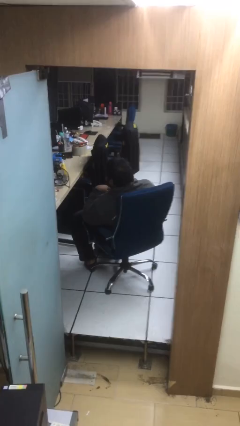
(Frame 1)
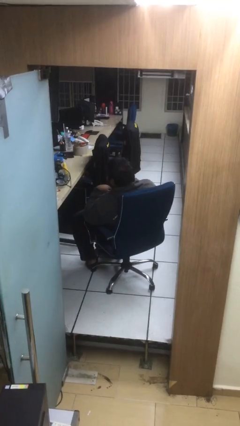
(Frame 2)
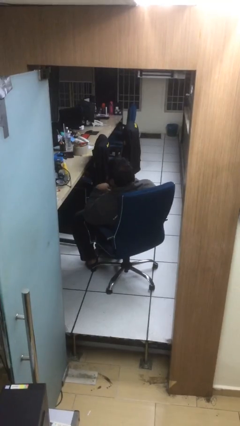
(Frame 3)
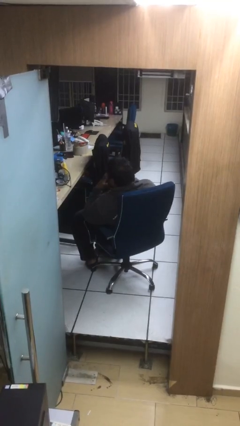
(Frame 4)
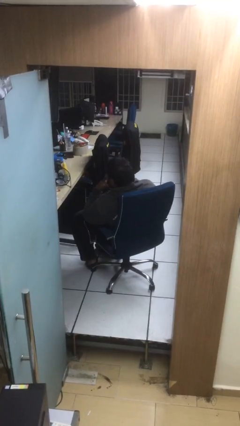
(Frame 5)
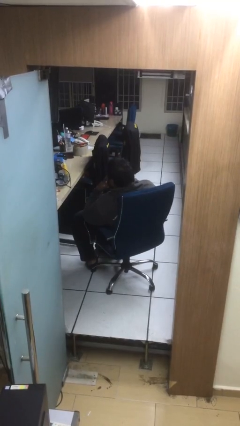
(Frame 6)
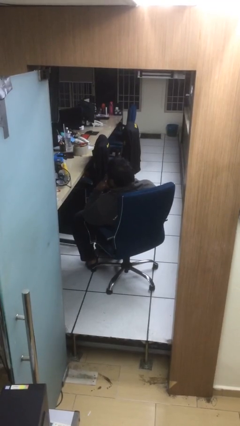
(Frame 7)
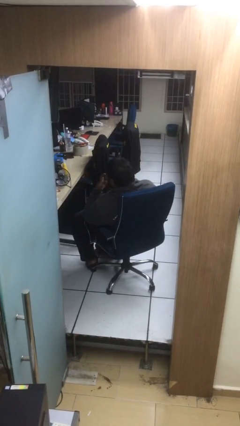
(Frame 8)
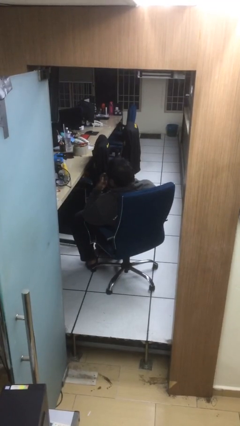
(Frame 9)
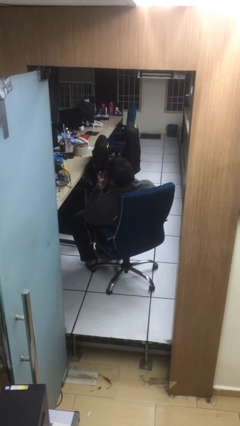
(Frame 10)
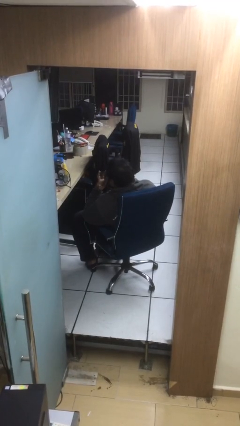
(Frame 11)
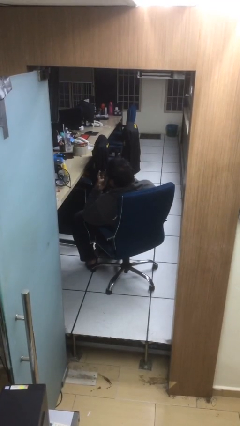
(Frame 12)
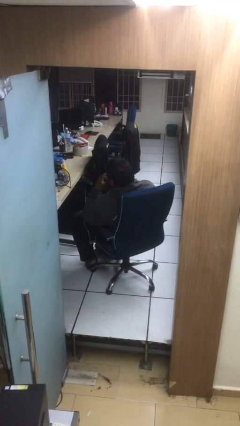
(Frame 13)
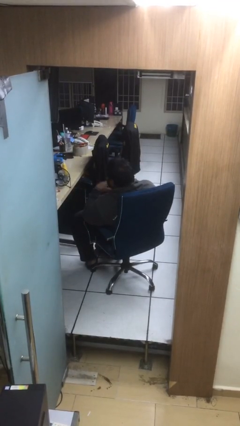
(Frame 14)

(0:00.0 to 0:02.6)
person licks fingers

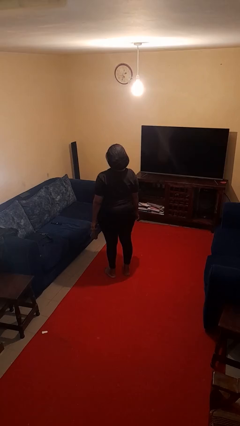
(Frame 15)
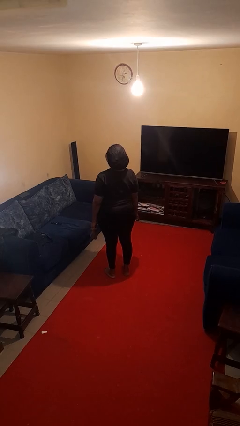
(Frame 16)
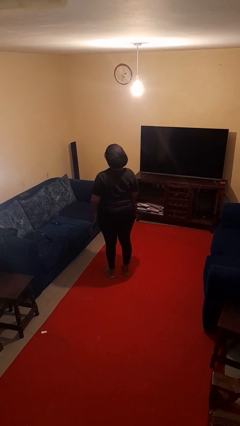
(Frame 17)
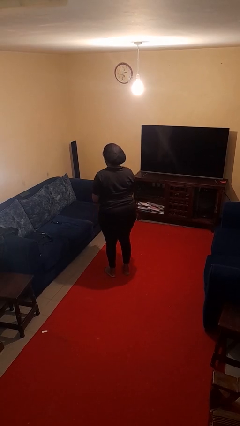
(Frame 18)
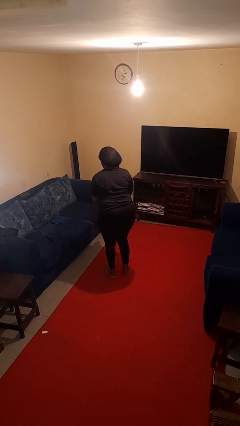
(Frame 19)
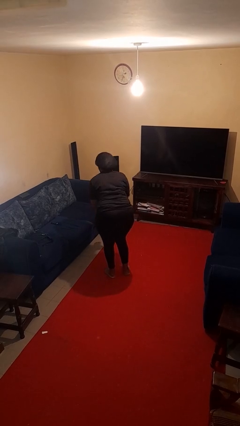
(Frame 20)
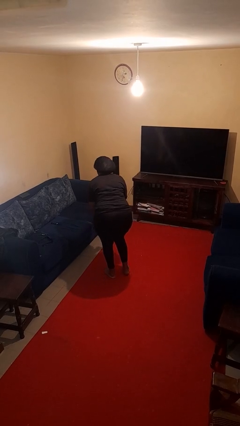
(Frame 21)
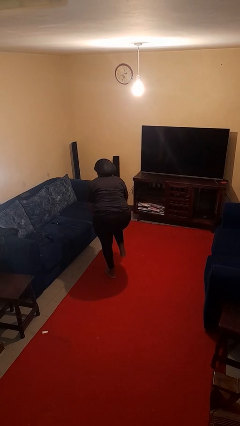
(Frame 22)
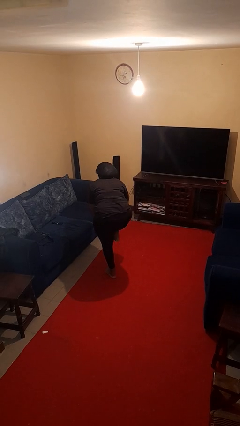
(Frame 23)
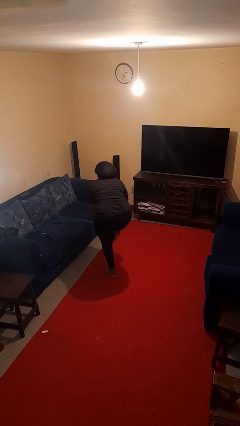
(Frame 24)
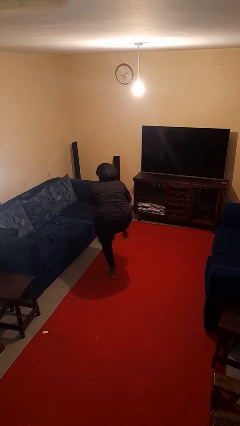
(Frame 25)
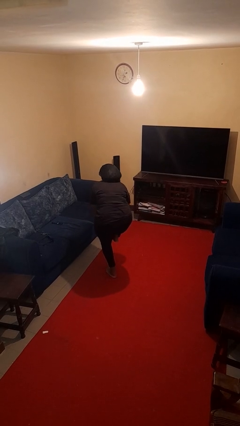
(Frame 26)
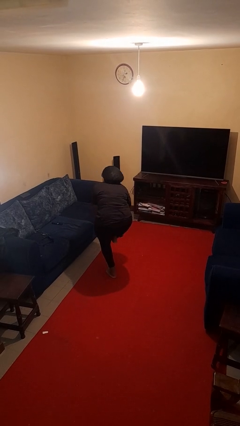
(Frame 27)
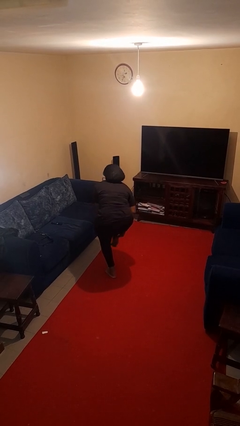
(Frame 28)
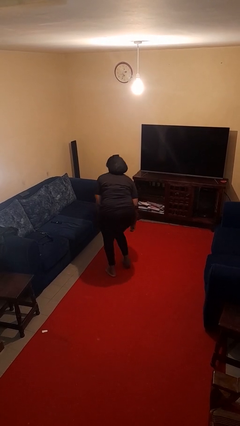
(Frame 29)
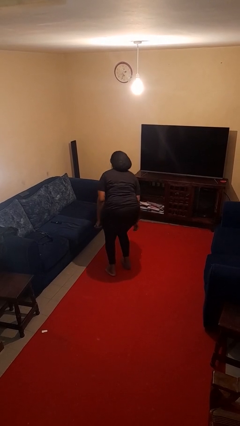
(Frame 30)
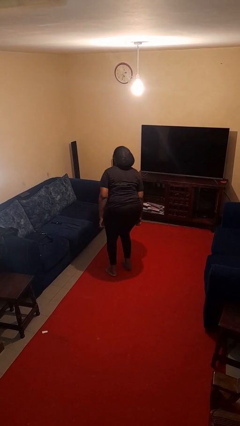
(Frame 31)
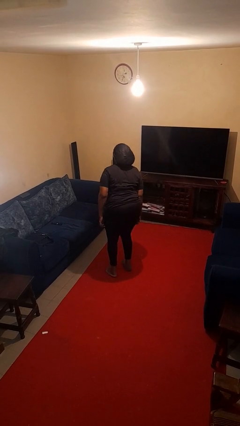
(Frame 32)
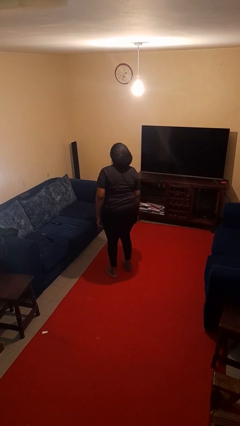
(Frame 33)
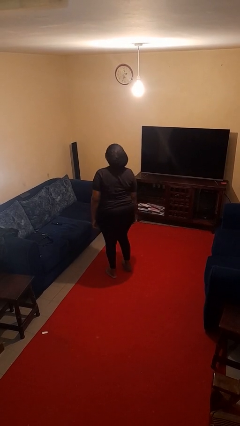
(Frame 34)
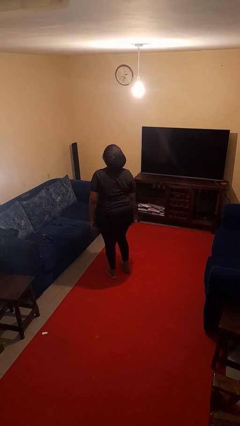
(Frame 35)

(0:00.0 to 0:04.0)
person puts on socks

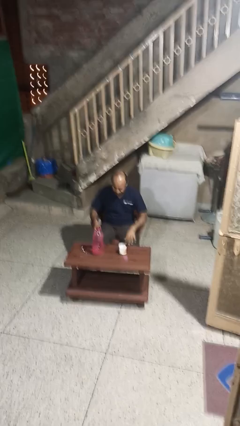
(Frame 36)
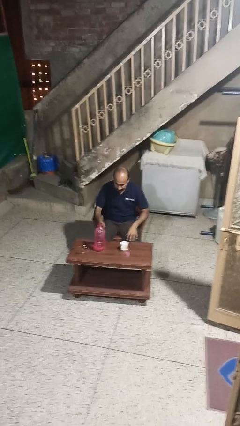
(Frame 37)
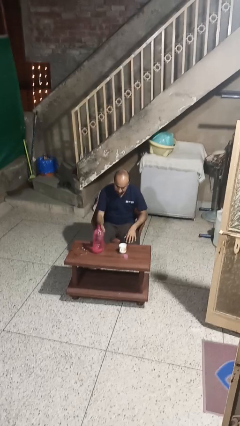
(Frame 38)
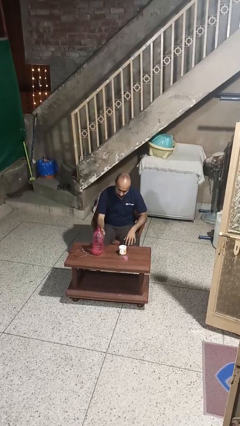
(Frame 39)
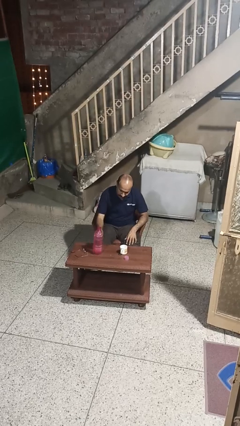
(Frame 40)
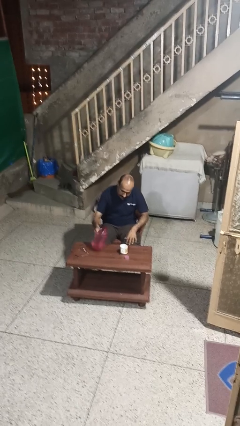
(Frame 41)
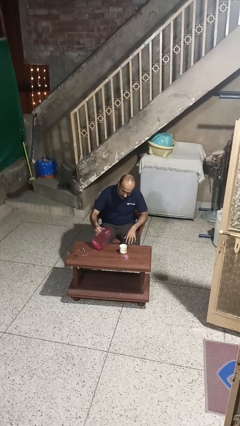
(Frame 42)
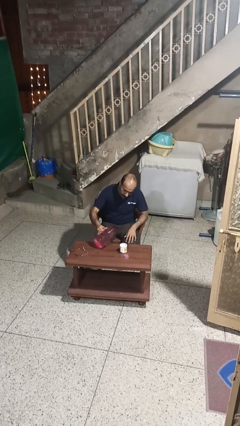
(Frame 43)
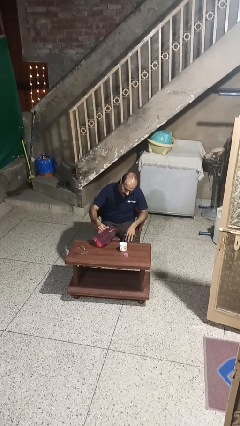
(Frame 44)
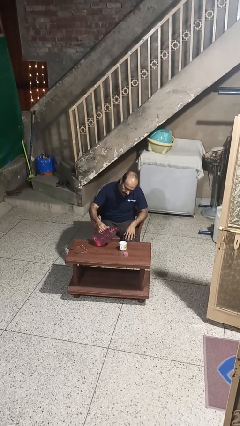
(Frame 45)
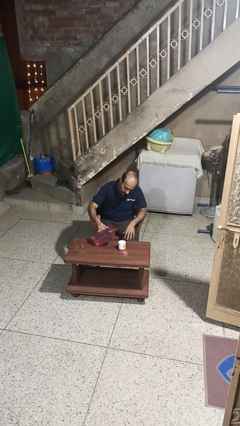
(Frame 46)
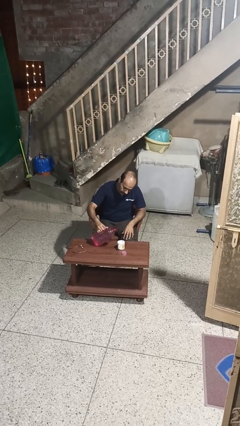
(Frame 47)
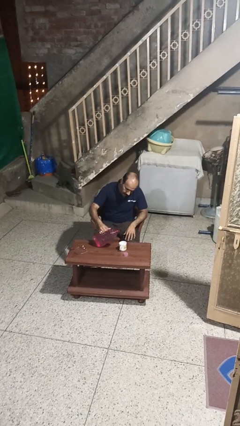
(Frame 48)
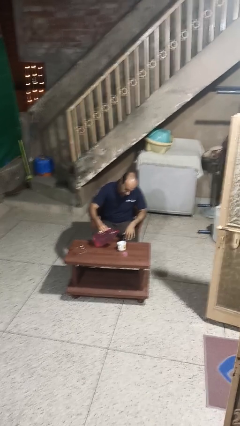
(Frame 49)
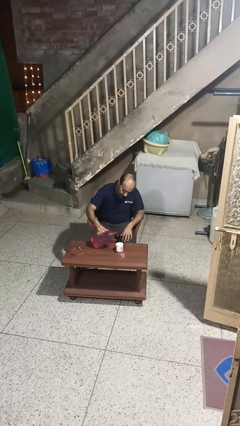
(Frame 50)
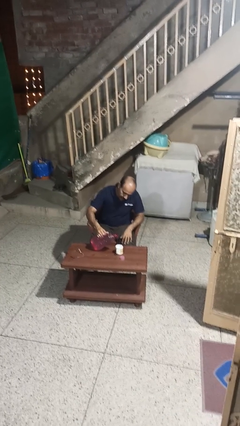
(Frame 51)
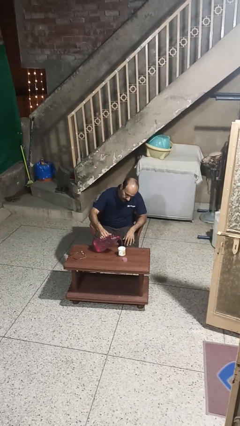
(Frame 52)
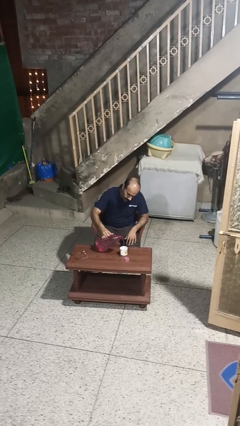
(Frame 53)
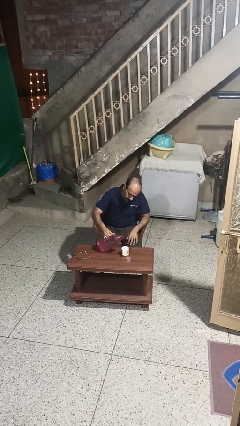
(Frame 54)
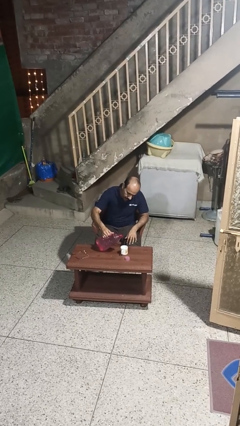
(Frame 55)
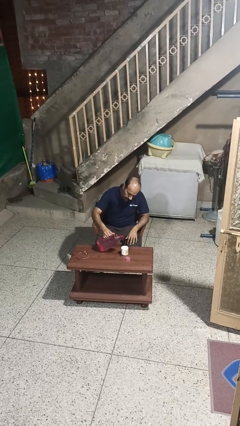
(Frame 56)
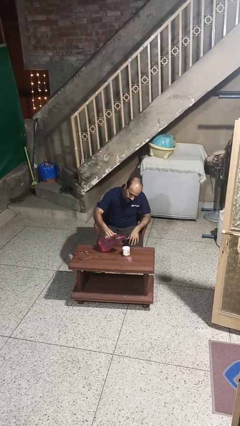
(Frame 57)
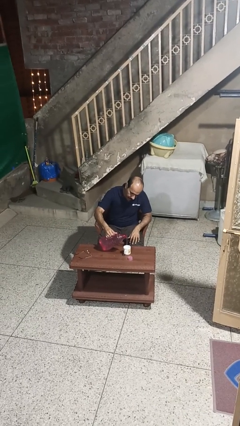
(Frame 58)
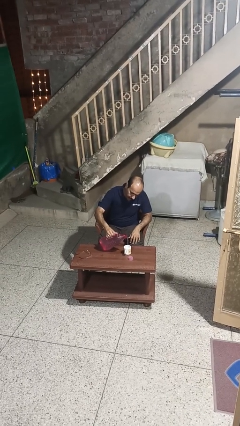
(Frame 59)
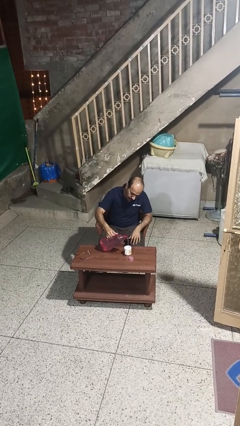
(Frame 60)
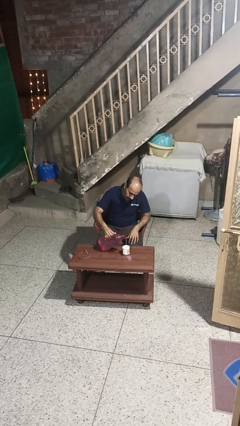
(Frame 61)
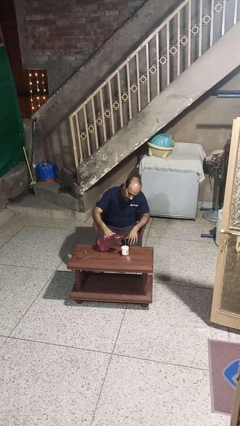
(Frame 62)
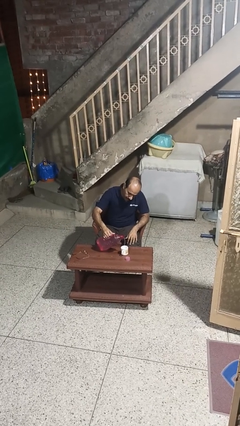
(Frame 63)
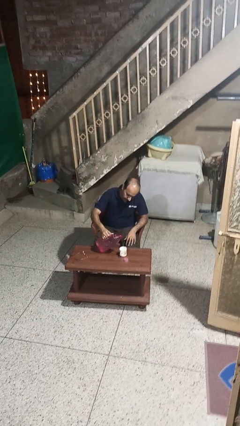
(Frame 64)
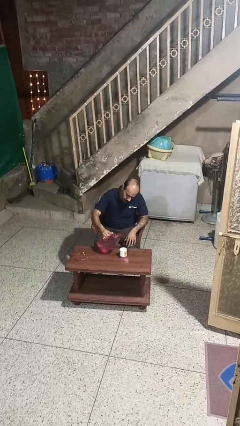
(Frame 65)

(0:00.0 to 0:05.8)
person pours liquid into cup

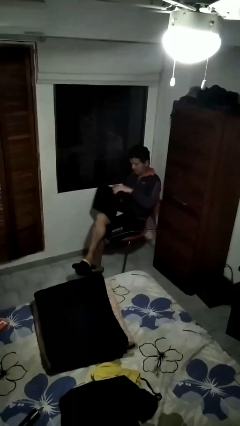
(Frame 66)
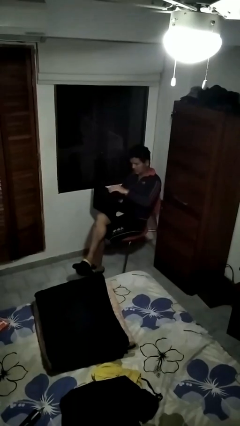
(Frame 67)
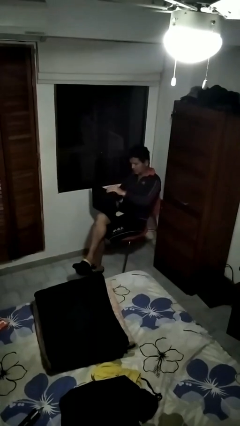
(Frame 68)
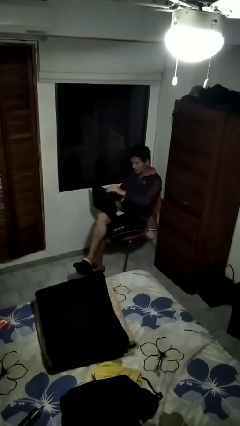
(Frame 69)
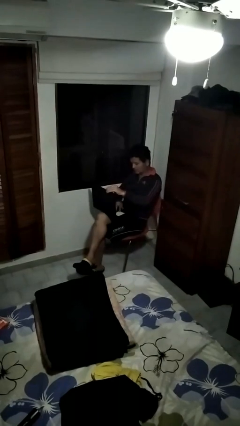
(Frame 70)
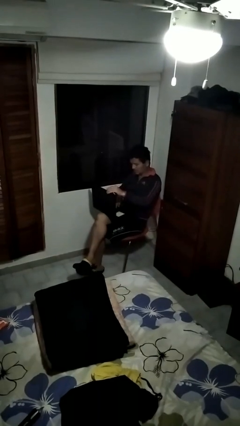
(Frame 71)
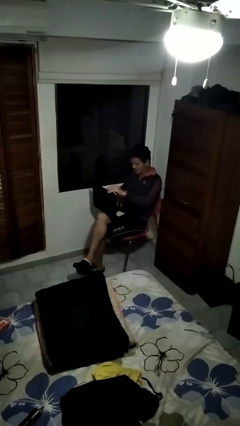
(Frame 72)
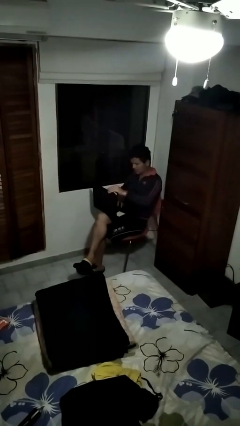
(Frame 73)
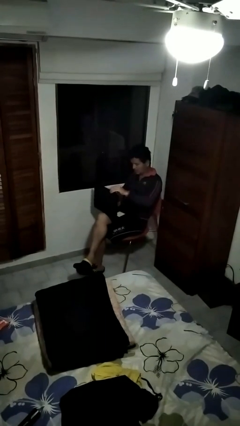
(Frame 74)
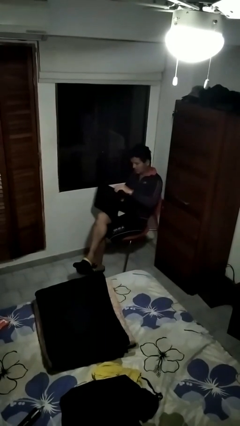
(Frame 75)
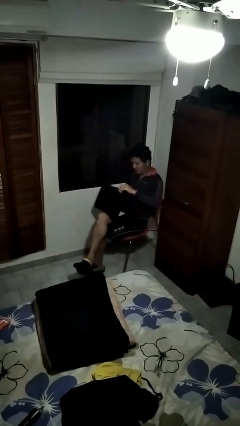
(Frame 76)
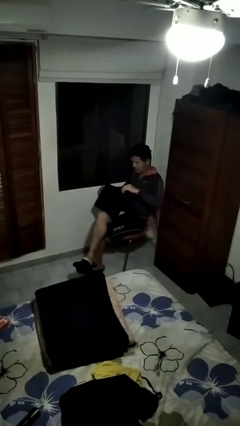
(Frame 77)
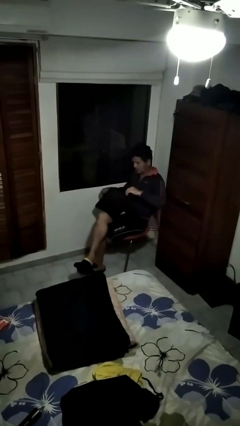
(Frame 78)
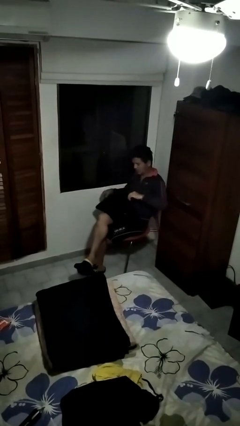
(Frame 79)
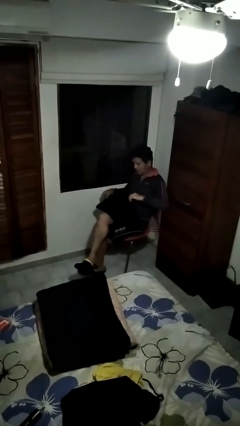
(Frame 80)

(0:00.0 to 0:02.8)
person interacts with laptop

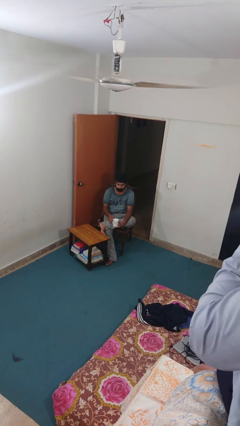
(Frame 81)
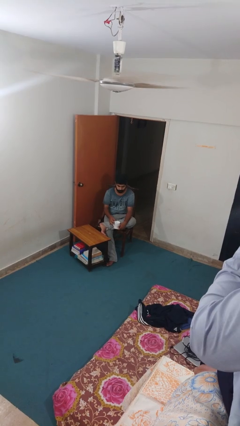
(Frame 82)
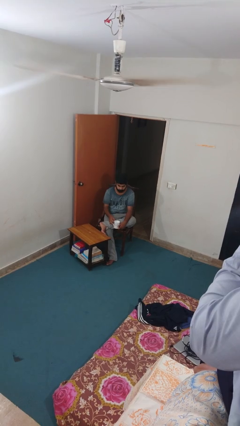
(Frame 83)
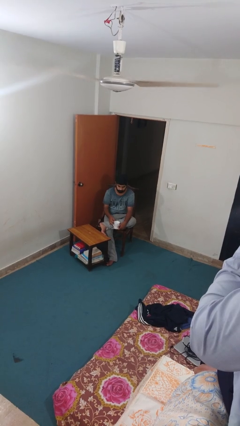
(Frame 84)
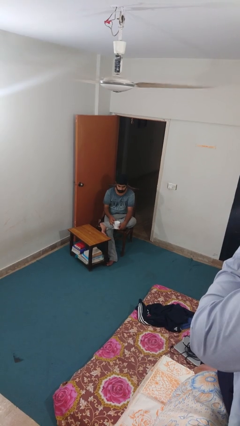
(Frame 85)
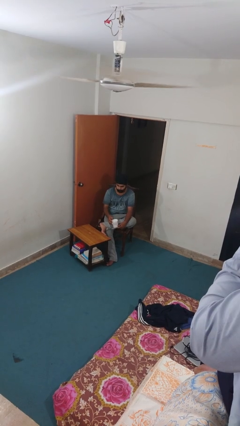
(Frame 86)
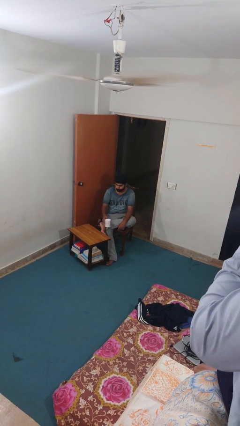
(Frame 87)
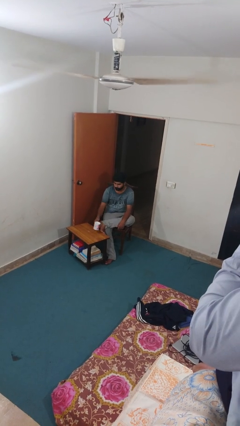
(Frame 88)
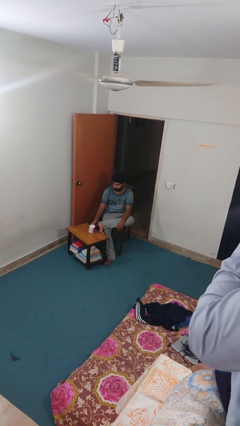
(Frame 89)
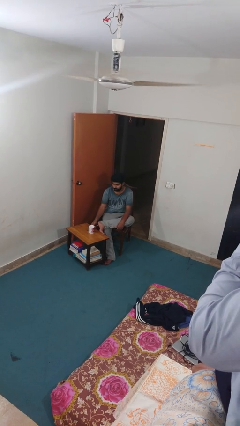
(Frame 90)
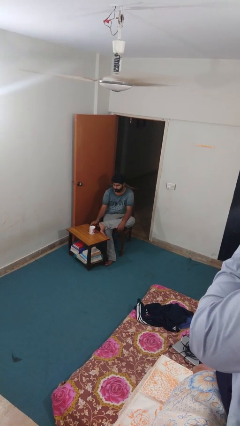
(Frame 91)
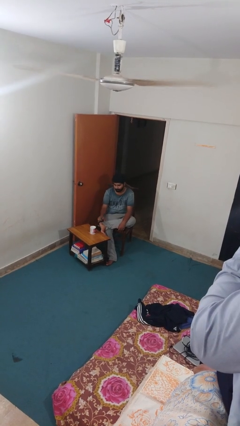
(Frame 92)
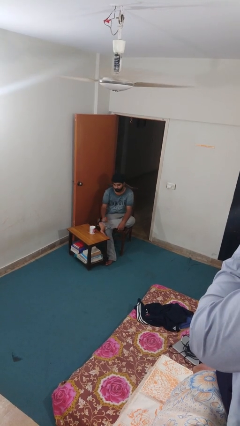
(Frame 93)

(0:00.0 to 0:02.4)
person puts down object on table

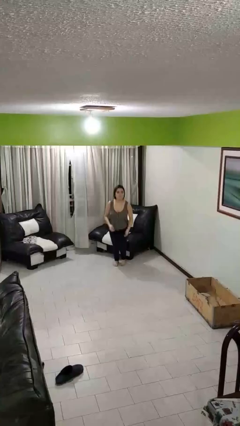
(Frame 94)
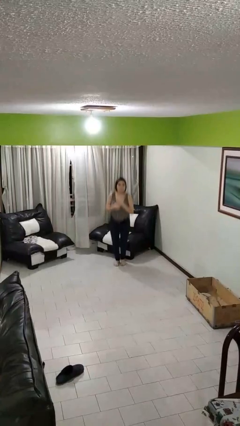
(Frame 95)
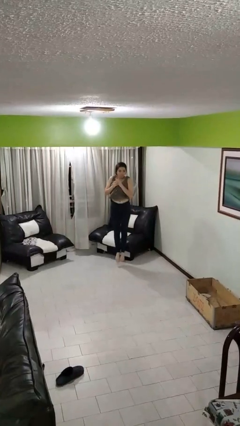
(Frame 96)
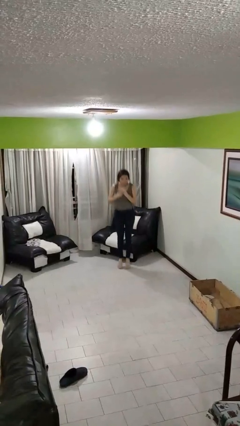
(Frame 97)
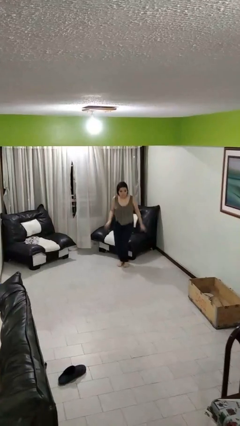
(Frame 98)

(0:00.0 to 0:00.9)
person jumps
